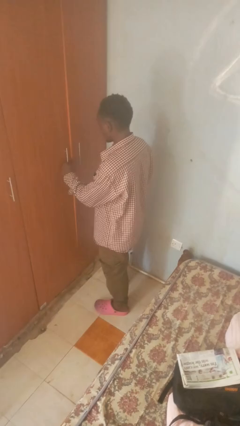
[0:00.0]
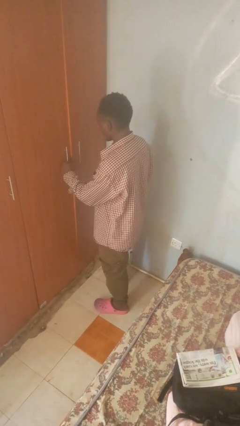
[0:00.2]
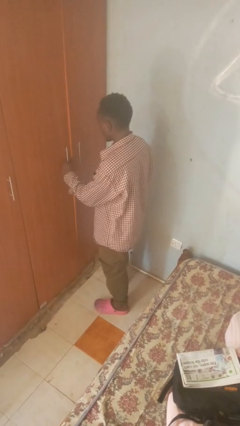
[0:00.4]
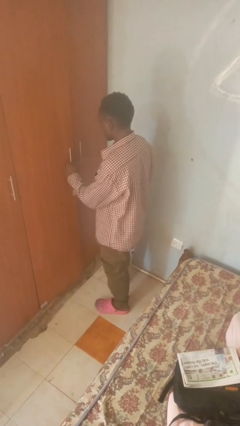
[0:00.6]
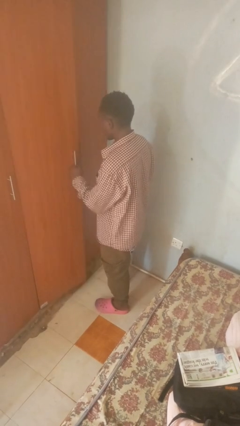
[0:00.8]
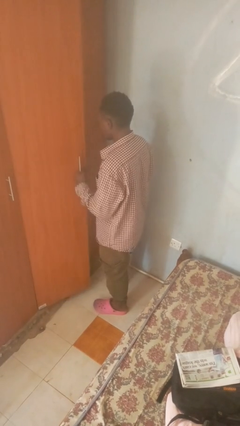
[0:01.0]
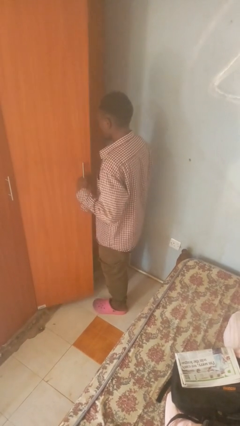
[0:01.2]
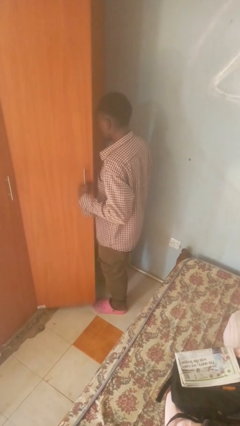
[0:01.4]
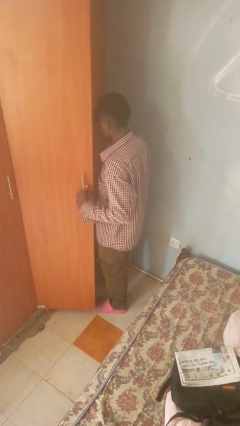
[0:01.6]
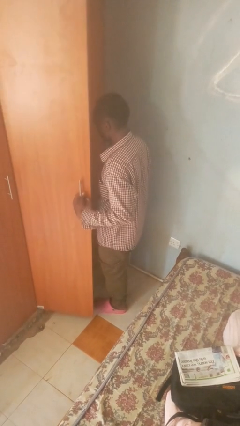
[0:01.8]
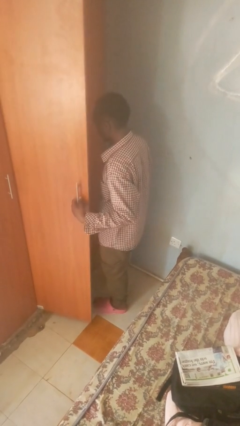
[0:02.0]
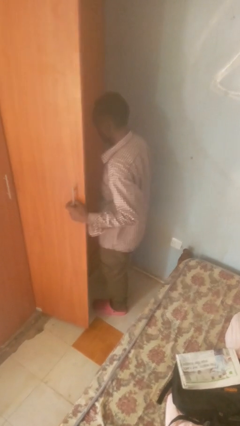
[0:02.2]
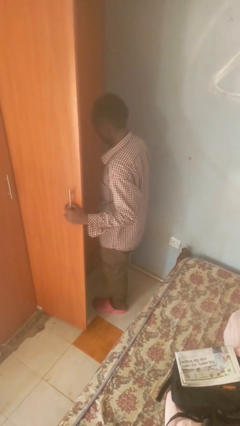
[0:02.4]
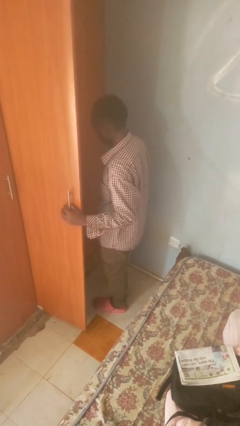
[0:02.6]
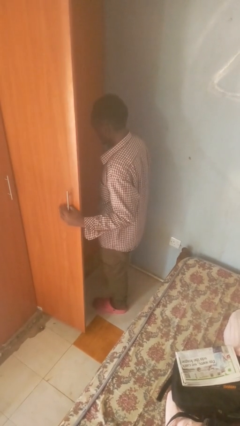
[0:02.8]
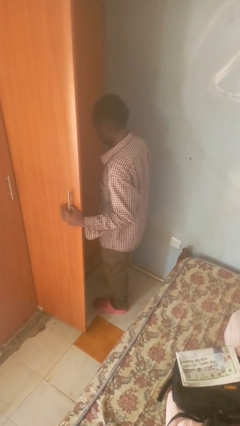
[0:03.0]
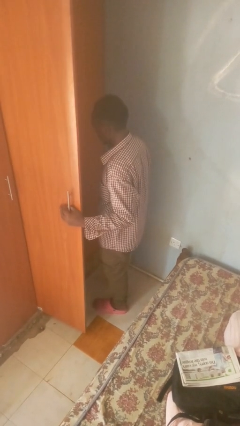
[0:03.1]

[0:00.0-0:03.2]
person opens closet door

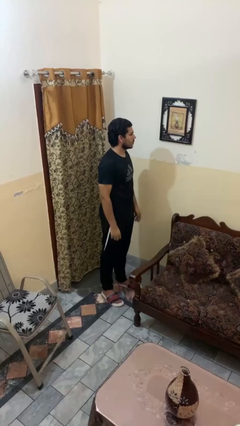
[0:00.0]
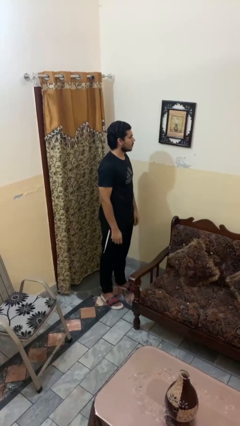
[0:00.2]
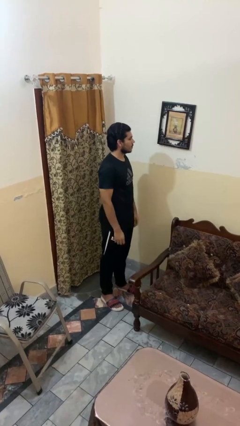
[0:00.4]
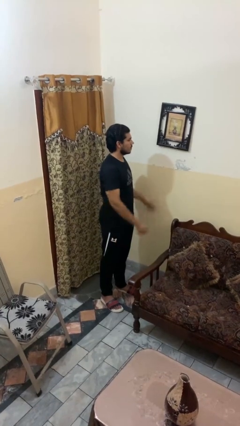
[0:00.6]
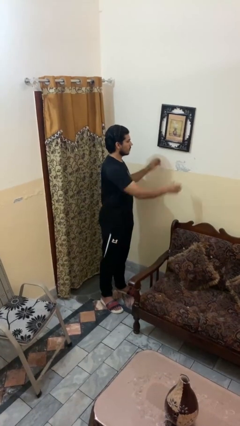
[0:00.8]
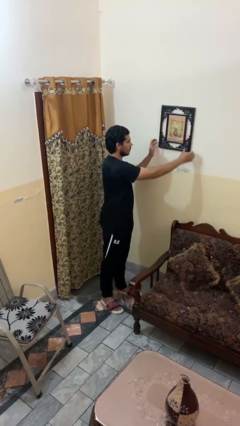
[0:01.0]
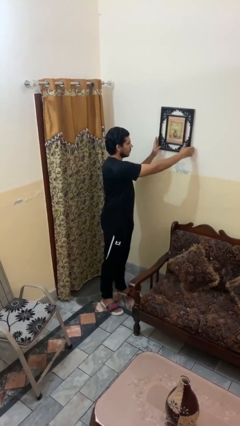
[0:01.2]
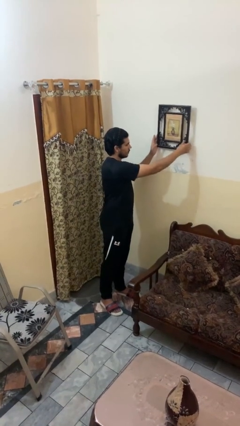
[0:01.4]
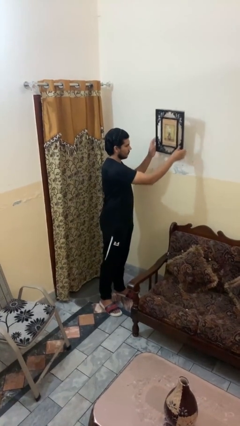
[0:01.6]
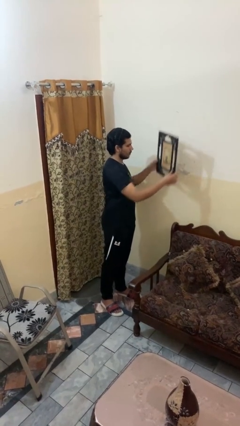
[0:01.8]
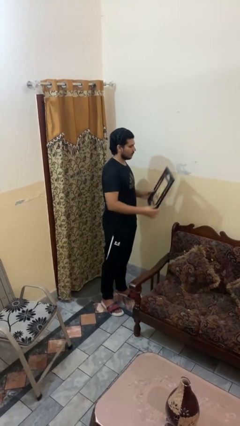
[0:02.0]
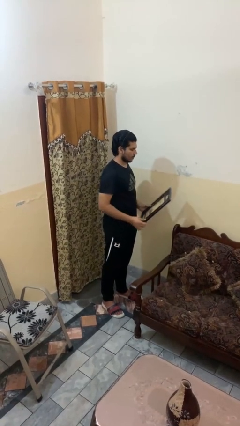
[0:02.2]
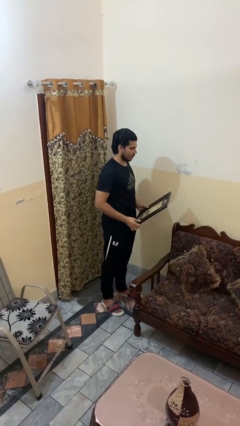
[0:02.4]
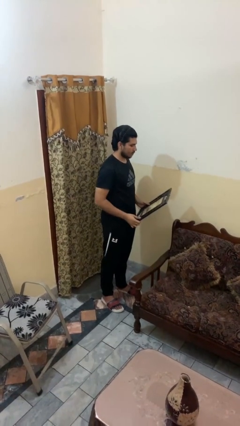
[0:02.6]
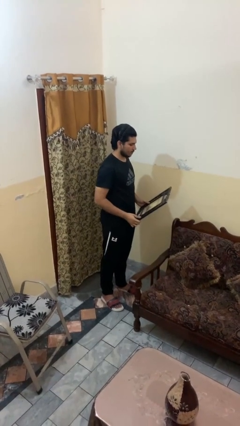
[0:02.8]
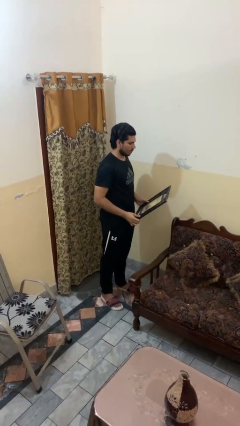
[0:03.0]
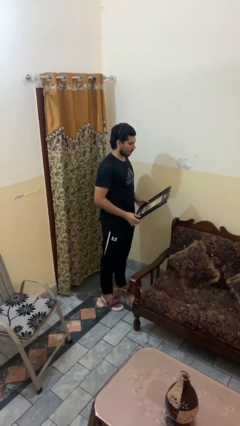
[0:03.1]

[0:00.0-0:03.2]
person takes down picture frame

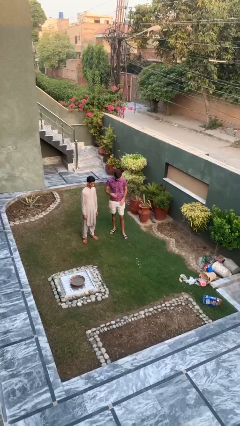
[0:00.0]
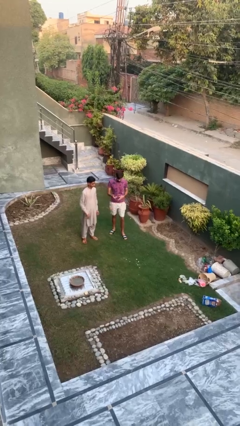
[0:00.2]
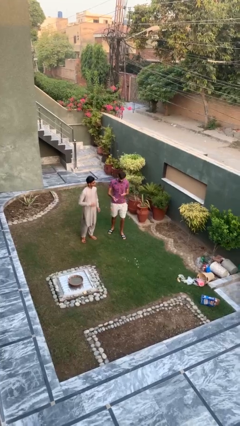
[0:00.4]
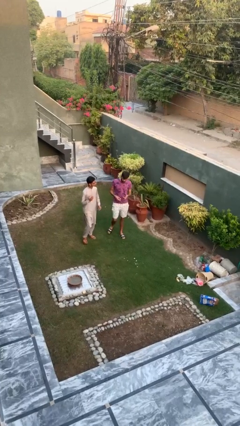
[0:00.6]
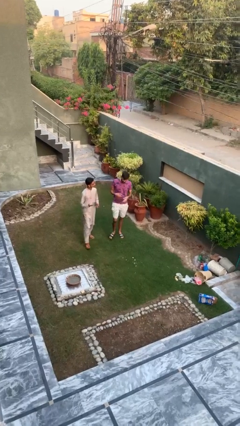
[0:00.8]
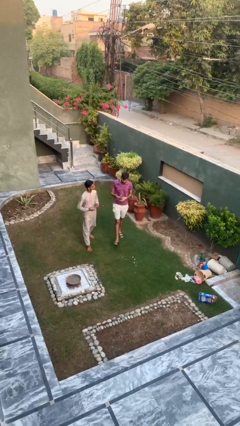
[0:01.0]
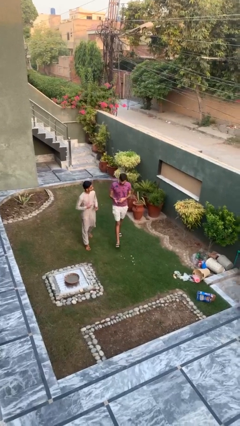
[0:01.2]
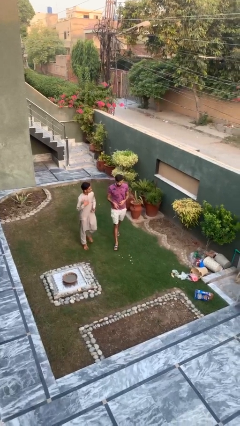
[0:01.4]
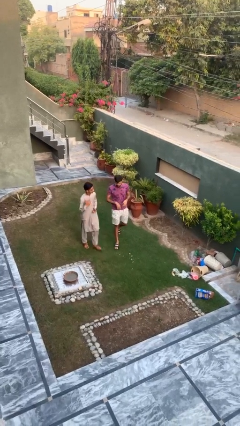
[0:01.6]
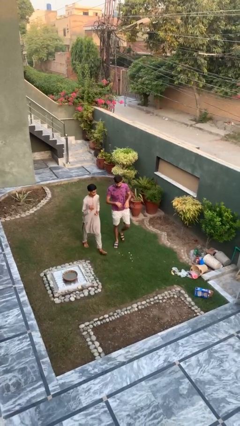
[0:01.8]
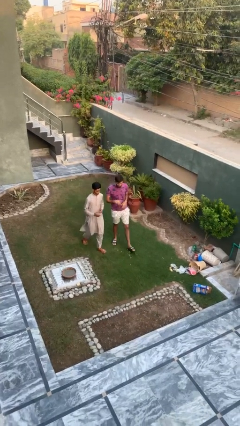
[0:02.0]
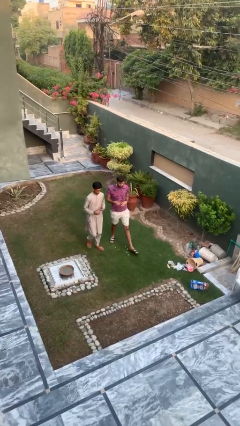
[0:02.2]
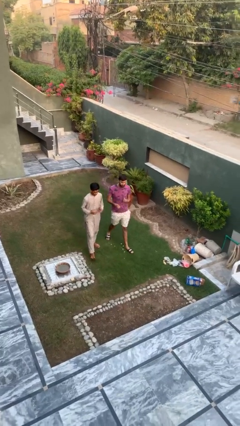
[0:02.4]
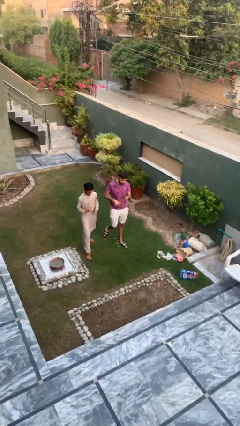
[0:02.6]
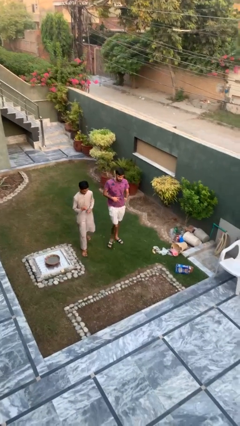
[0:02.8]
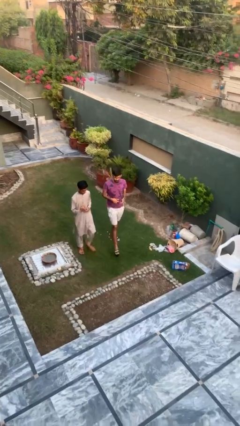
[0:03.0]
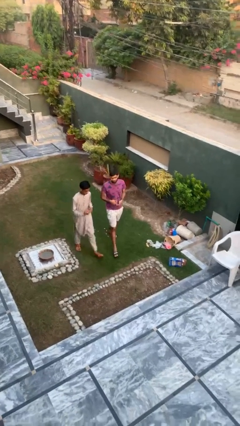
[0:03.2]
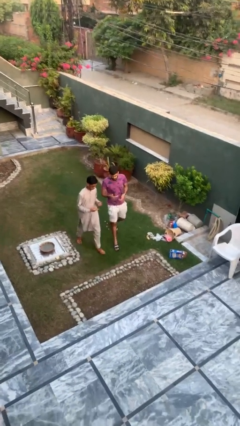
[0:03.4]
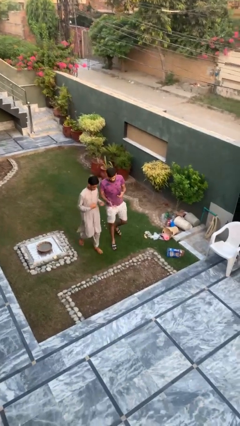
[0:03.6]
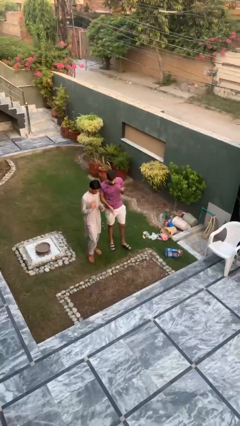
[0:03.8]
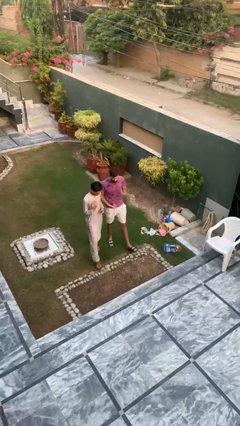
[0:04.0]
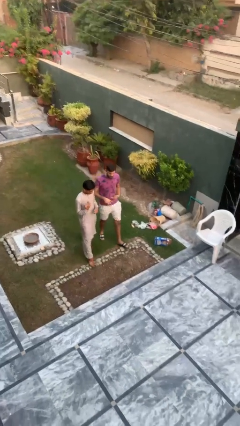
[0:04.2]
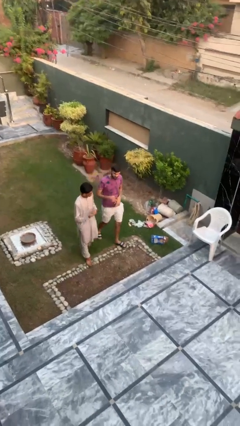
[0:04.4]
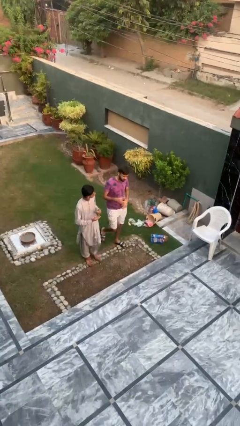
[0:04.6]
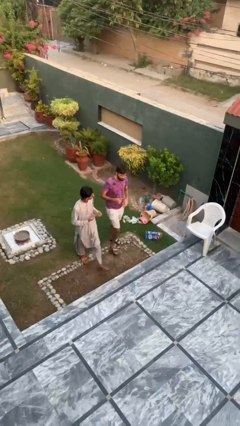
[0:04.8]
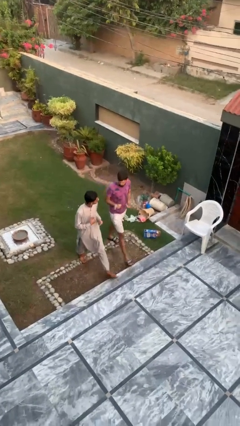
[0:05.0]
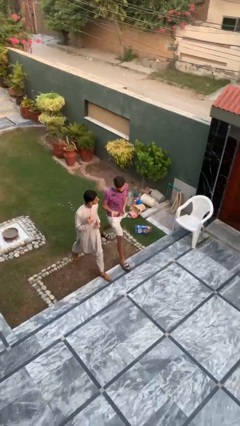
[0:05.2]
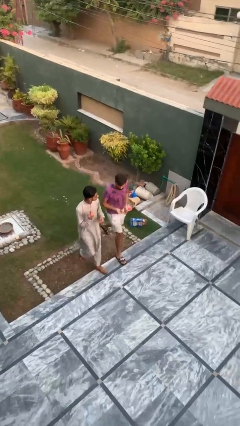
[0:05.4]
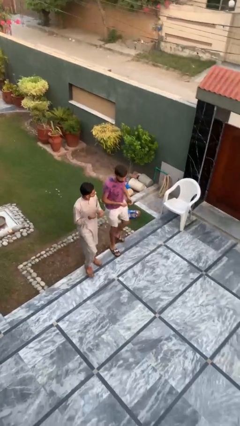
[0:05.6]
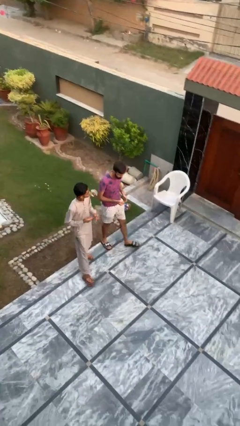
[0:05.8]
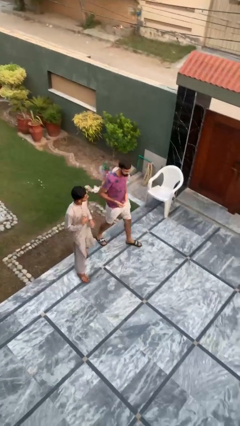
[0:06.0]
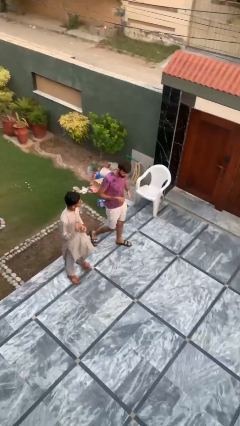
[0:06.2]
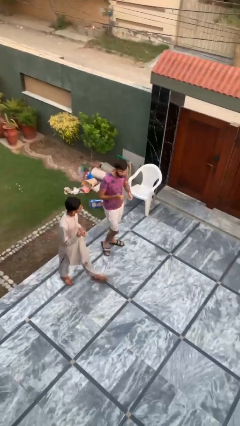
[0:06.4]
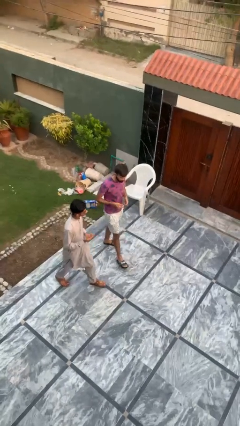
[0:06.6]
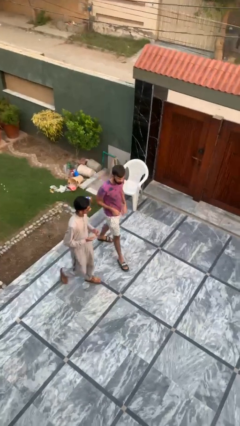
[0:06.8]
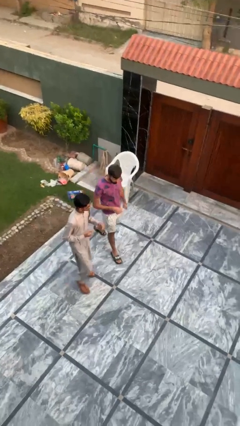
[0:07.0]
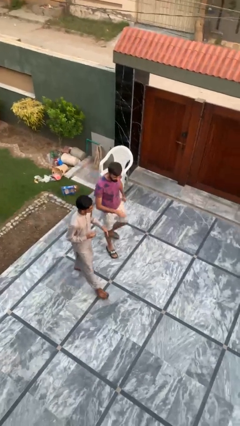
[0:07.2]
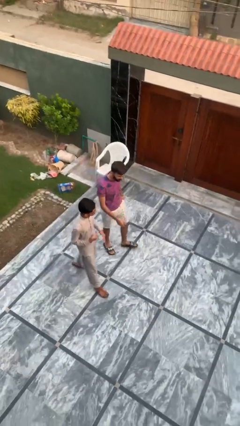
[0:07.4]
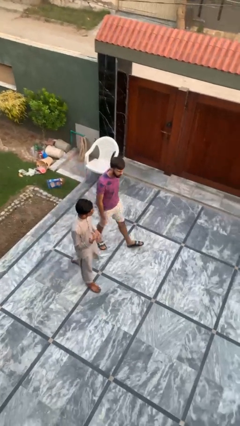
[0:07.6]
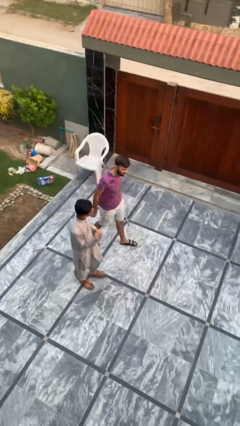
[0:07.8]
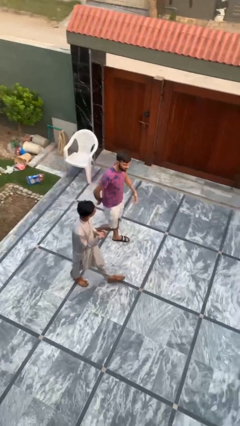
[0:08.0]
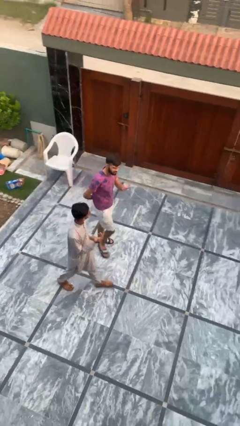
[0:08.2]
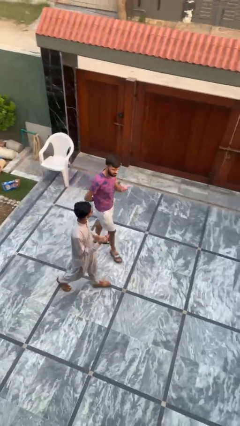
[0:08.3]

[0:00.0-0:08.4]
person talks to person

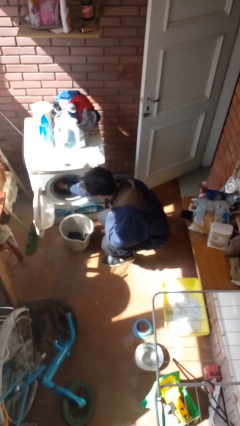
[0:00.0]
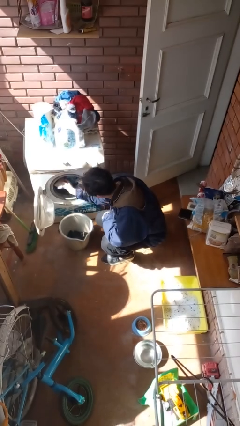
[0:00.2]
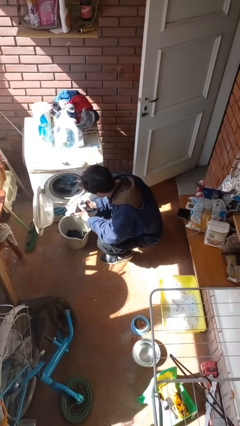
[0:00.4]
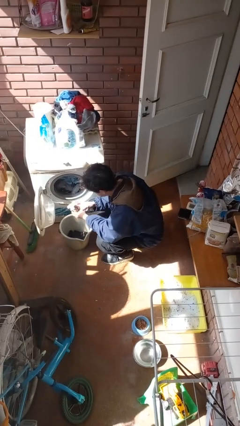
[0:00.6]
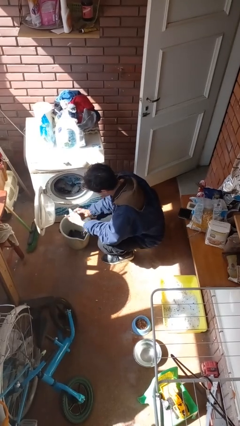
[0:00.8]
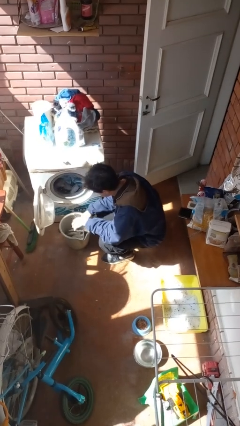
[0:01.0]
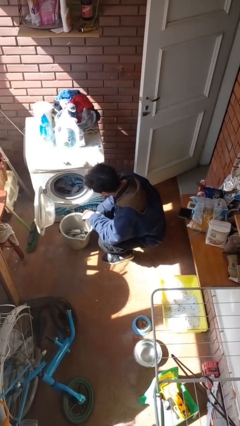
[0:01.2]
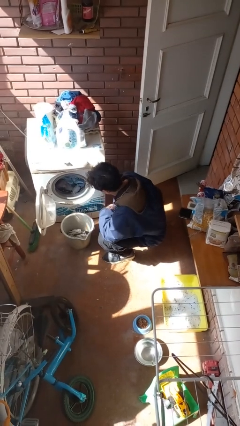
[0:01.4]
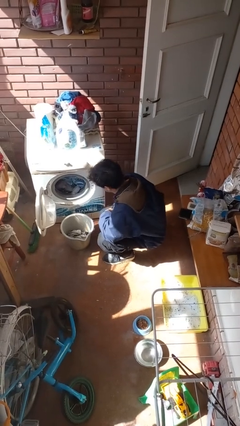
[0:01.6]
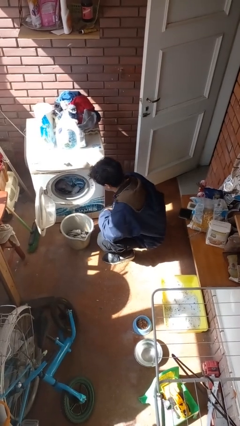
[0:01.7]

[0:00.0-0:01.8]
person unloads clotheswasher

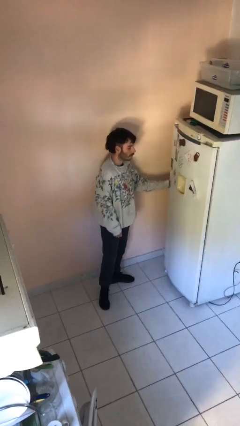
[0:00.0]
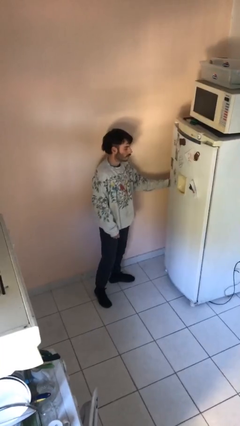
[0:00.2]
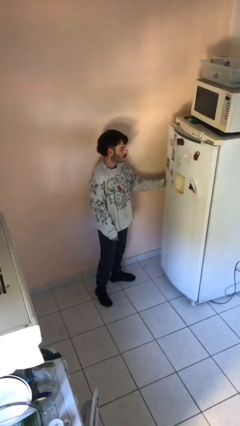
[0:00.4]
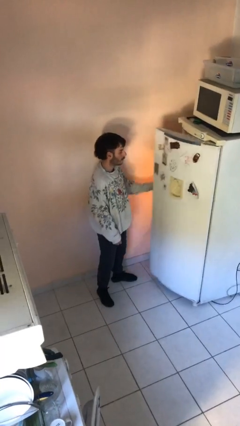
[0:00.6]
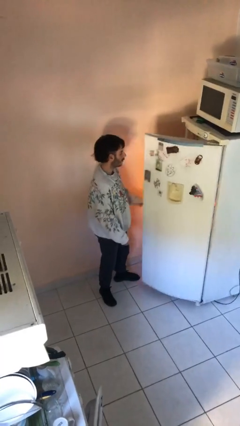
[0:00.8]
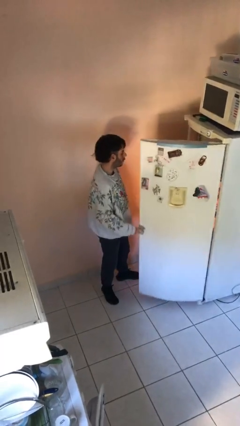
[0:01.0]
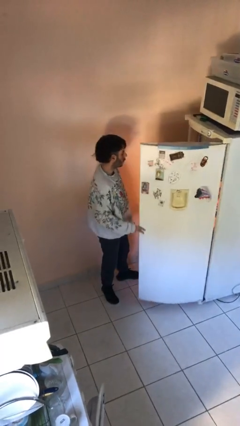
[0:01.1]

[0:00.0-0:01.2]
person opens refrigerator
